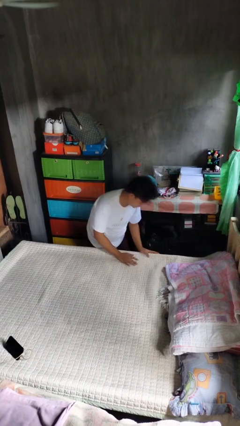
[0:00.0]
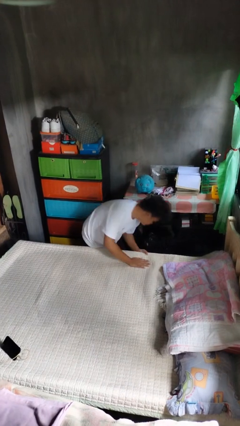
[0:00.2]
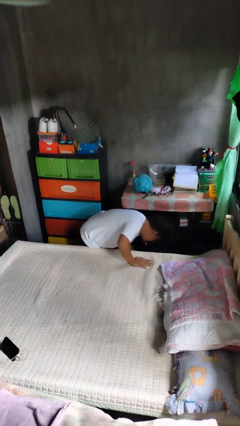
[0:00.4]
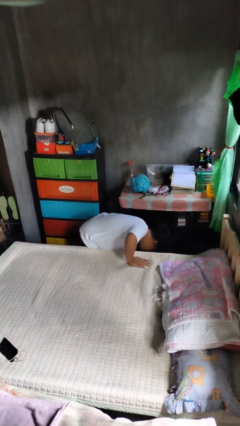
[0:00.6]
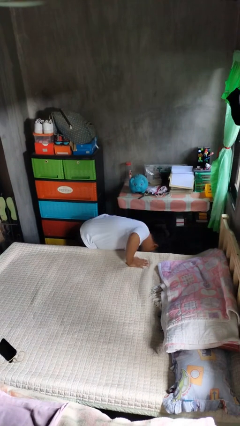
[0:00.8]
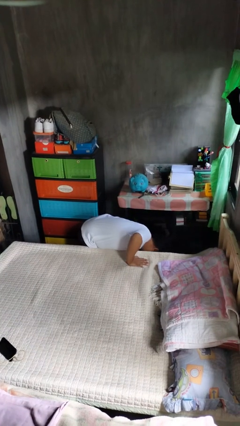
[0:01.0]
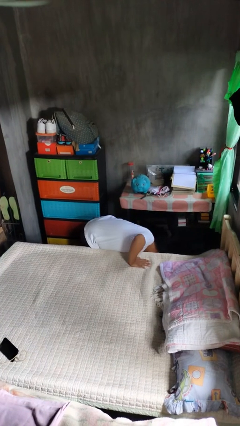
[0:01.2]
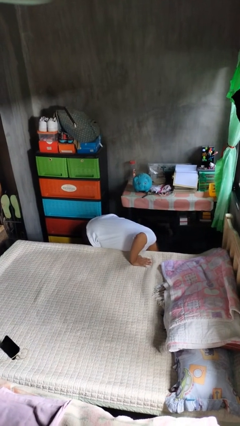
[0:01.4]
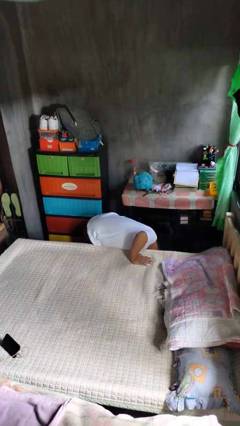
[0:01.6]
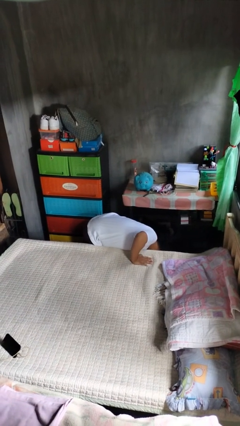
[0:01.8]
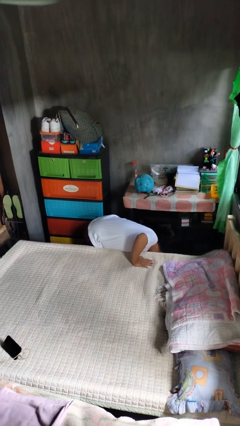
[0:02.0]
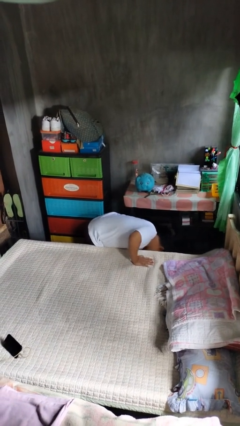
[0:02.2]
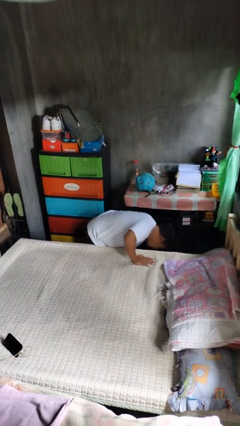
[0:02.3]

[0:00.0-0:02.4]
person searches under bed

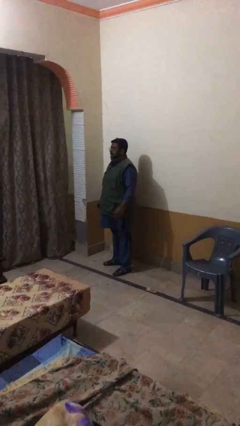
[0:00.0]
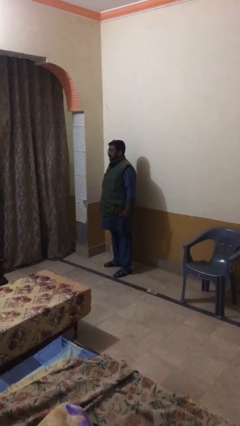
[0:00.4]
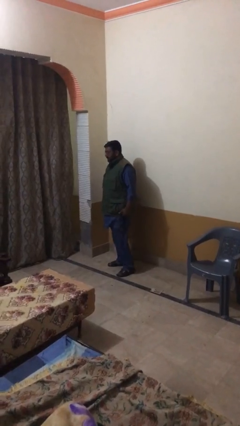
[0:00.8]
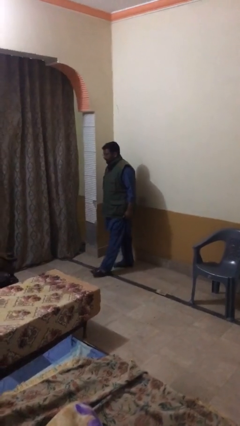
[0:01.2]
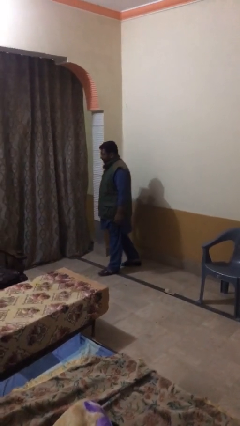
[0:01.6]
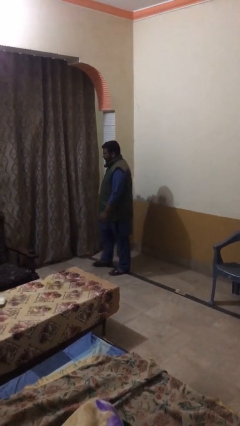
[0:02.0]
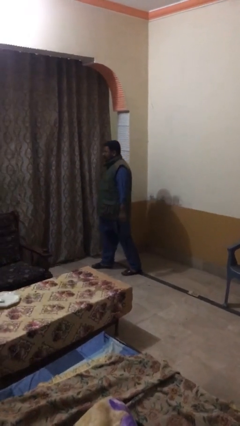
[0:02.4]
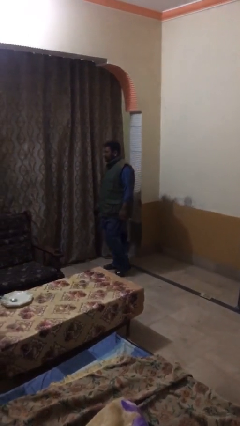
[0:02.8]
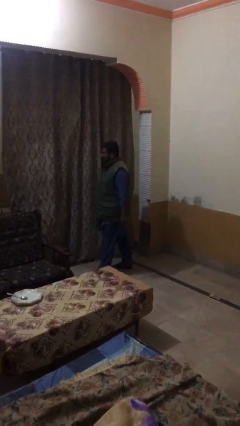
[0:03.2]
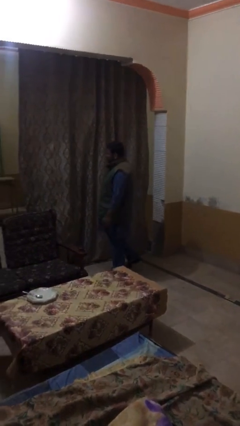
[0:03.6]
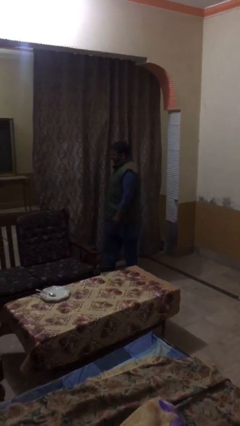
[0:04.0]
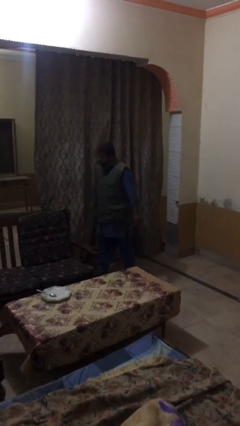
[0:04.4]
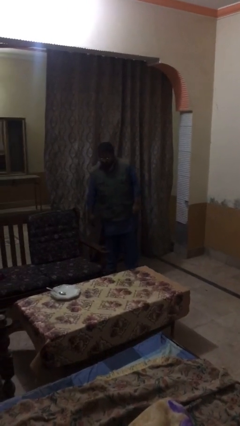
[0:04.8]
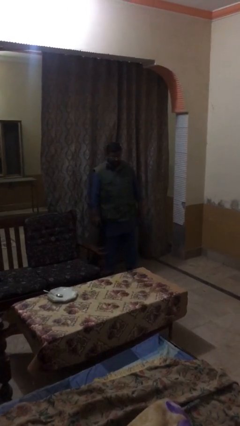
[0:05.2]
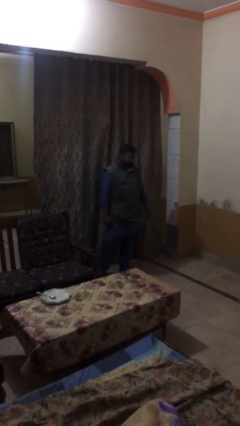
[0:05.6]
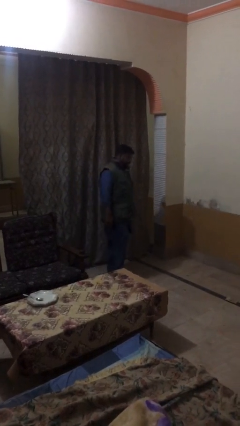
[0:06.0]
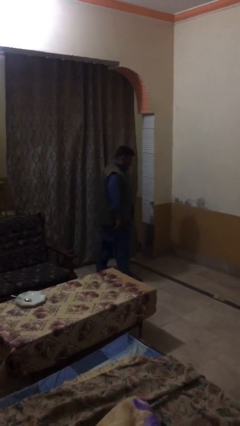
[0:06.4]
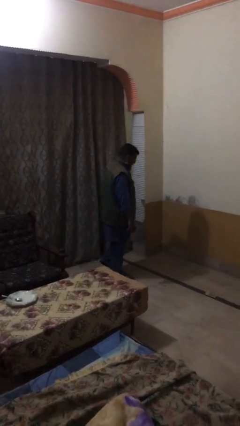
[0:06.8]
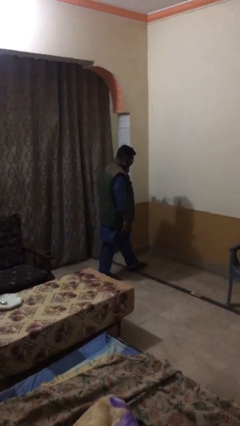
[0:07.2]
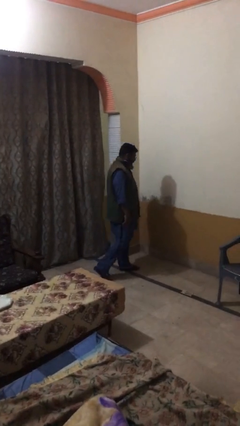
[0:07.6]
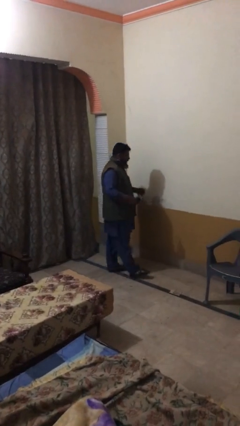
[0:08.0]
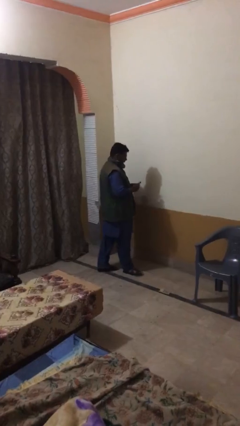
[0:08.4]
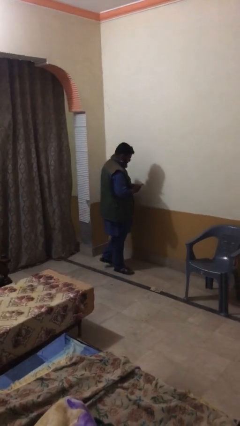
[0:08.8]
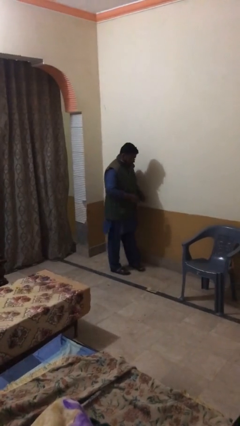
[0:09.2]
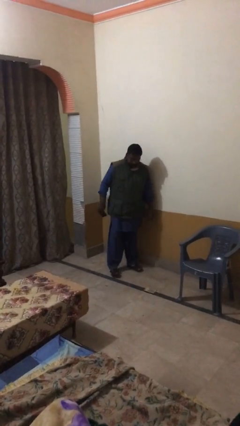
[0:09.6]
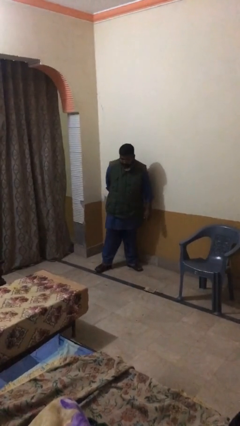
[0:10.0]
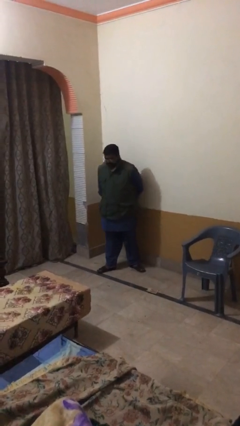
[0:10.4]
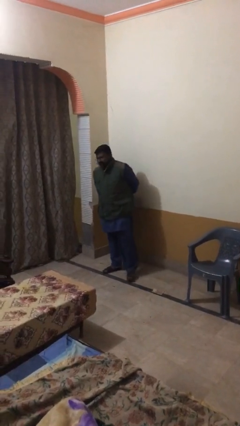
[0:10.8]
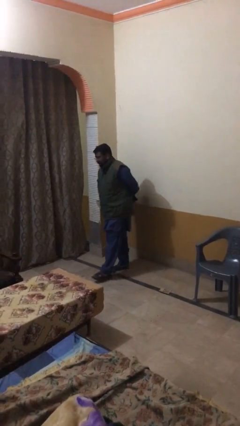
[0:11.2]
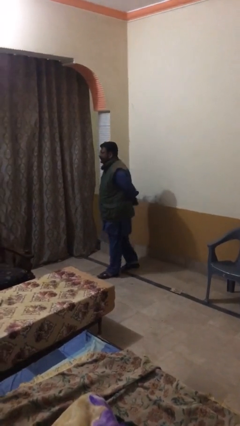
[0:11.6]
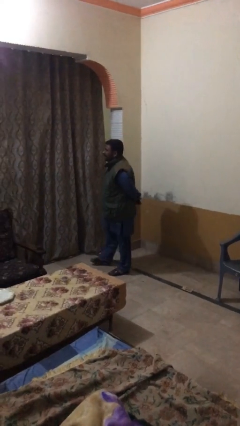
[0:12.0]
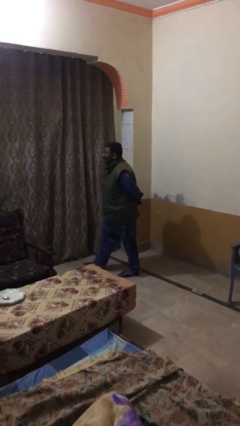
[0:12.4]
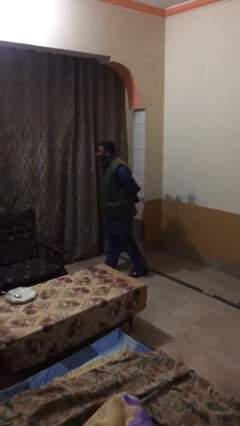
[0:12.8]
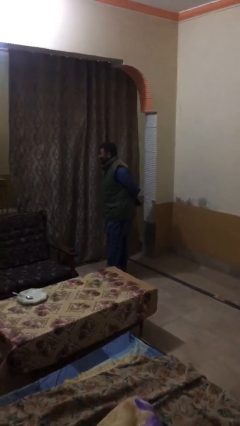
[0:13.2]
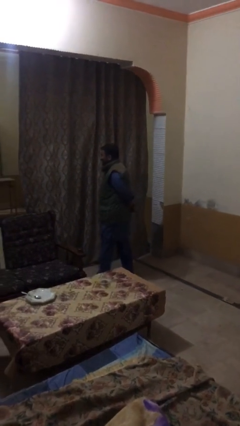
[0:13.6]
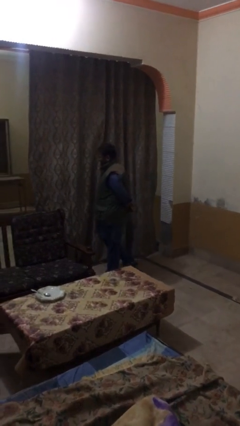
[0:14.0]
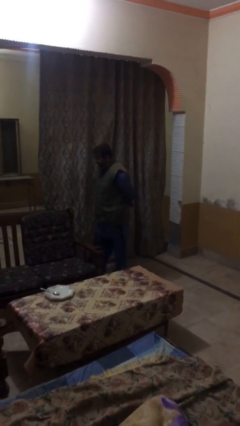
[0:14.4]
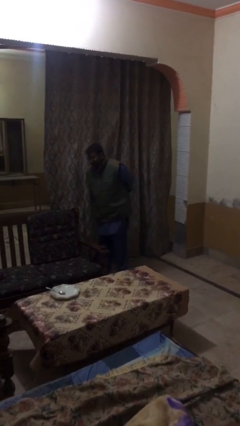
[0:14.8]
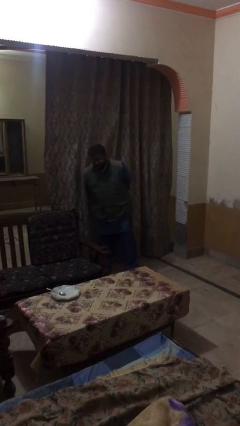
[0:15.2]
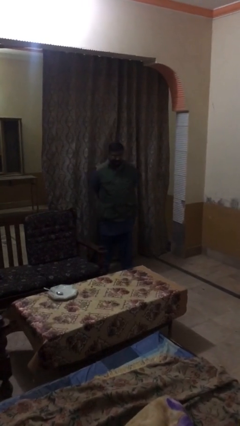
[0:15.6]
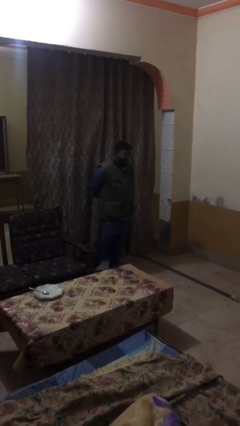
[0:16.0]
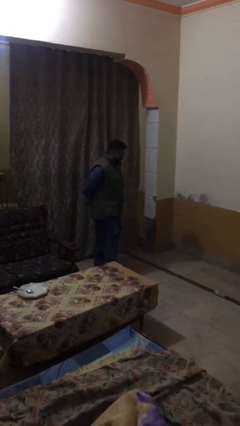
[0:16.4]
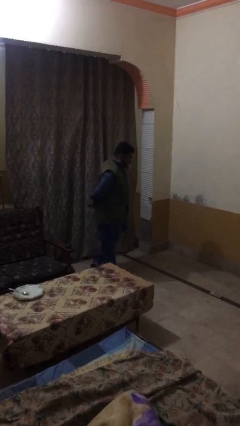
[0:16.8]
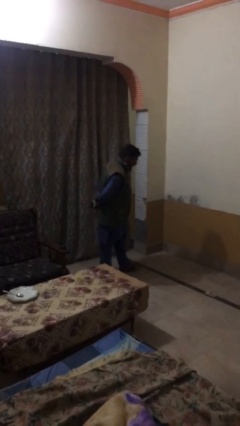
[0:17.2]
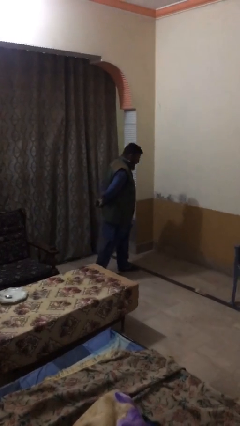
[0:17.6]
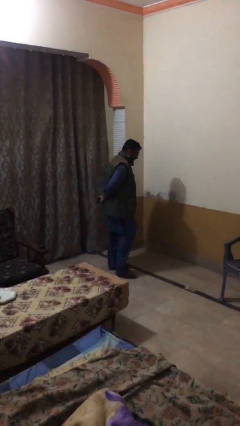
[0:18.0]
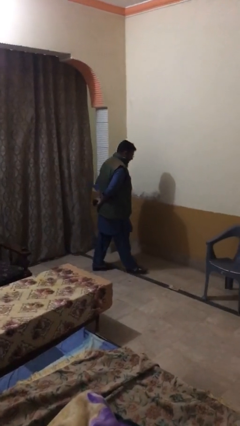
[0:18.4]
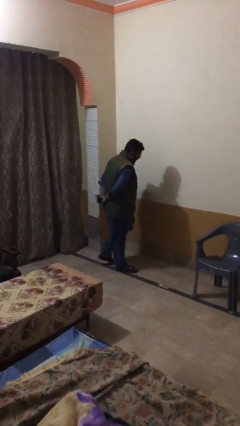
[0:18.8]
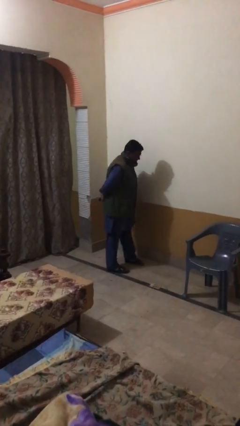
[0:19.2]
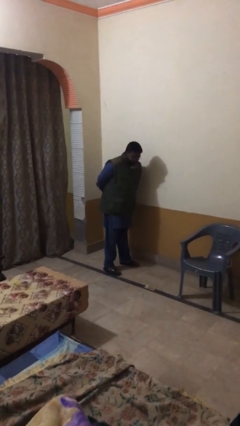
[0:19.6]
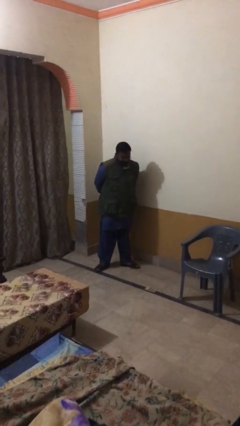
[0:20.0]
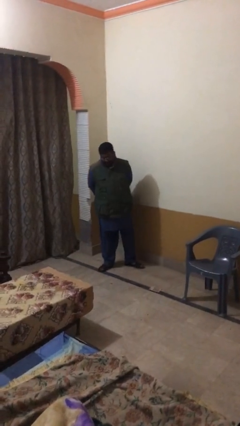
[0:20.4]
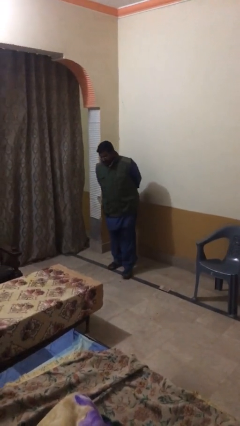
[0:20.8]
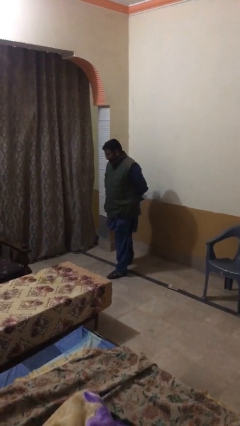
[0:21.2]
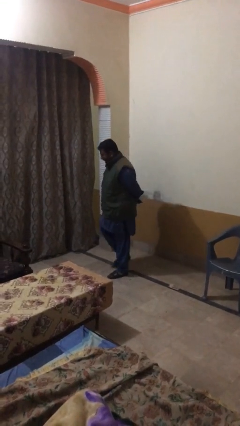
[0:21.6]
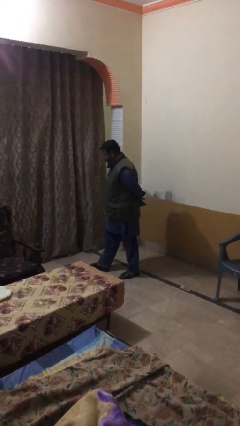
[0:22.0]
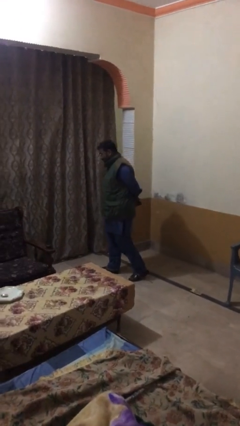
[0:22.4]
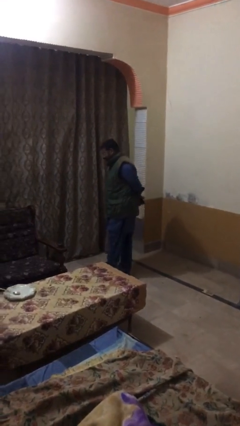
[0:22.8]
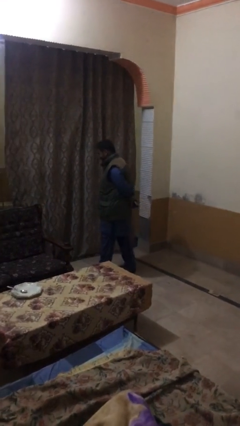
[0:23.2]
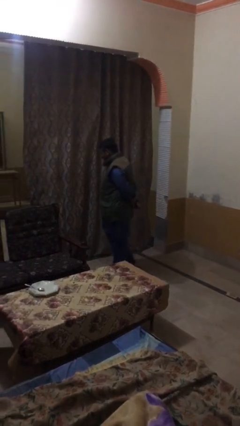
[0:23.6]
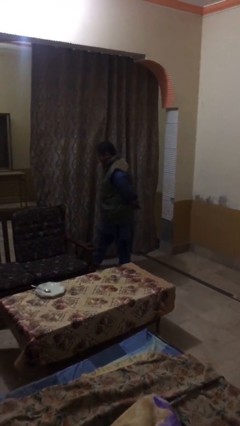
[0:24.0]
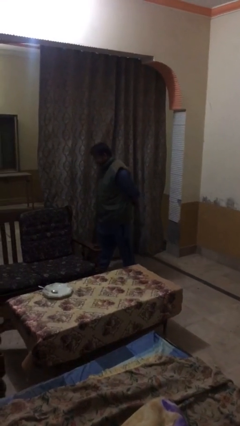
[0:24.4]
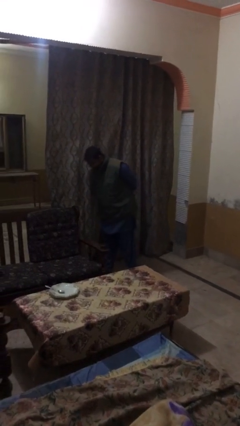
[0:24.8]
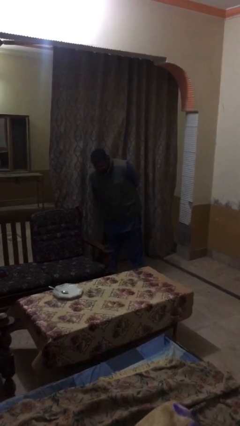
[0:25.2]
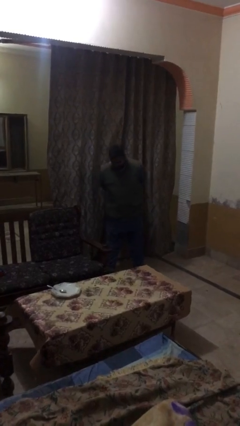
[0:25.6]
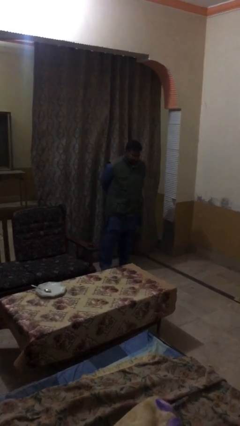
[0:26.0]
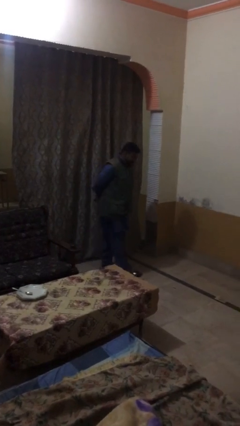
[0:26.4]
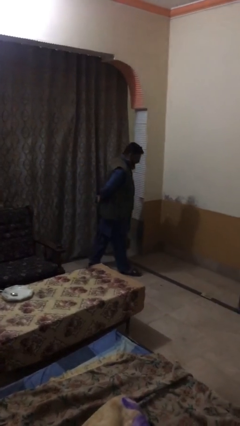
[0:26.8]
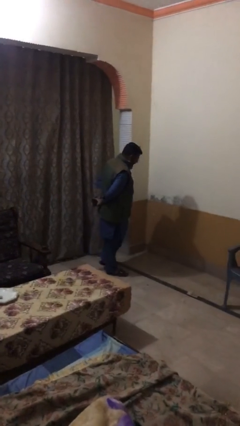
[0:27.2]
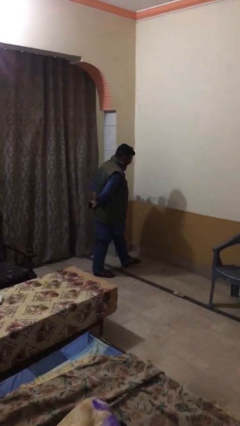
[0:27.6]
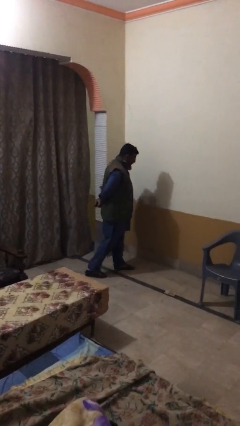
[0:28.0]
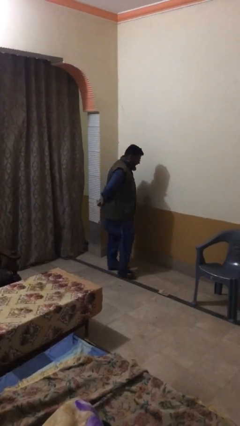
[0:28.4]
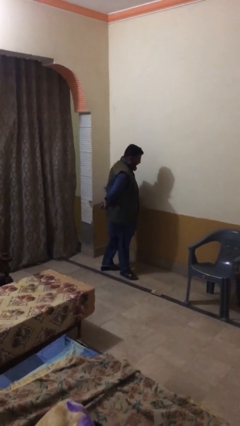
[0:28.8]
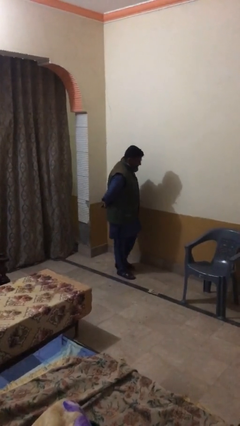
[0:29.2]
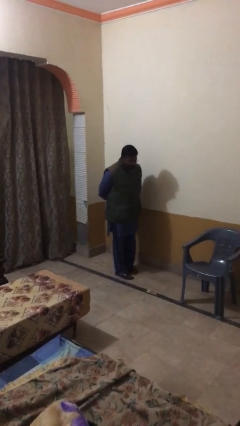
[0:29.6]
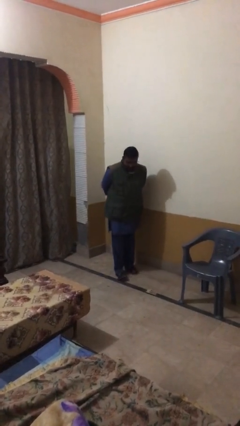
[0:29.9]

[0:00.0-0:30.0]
person walks

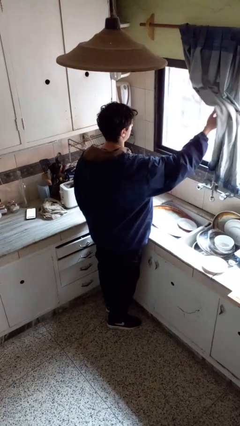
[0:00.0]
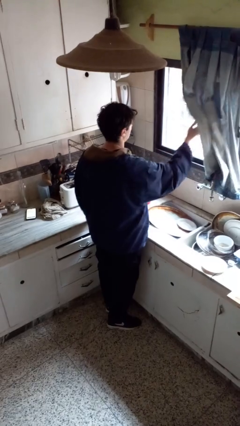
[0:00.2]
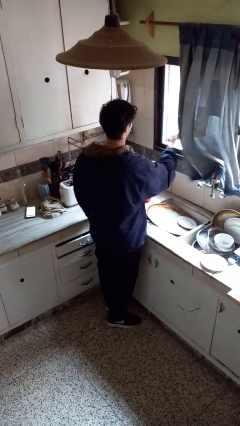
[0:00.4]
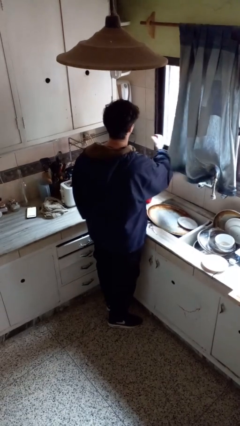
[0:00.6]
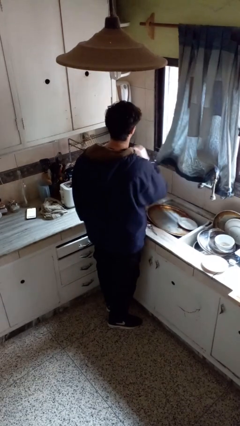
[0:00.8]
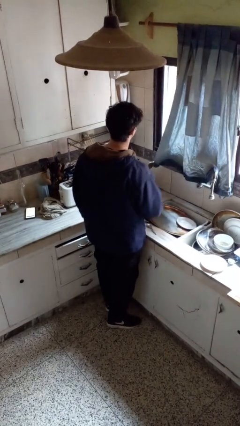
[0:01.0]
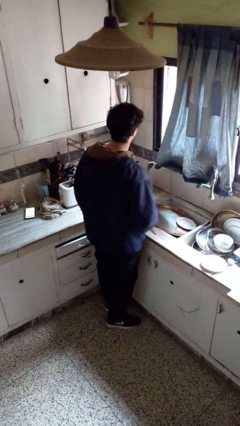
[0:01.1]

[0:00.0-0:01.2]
person closes curtains
